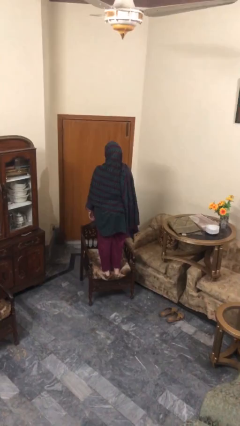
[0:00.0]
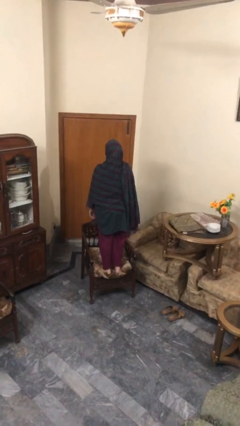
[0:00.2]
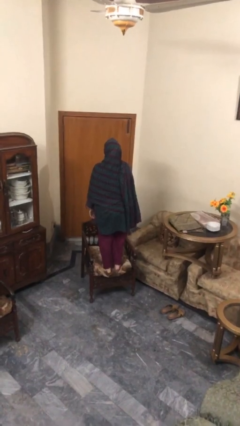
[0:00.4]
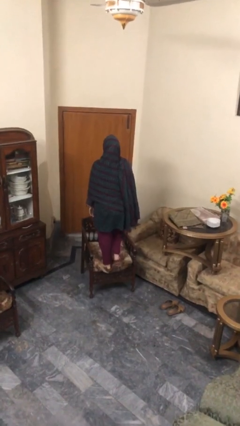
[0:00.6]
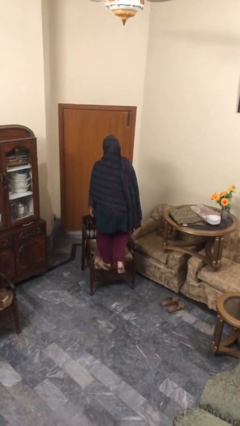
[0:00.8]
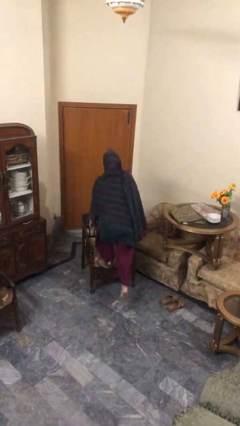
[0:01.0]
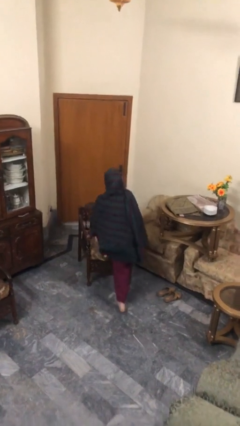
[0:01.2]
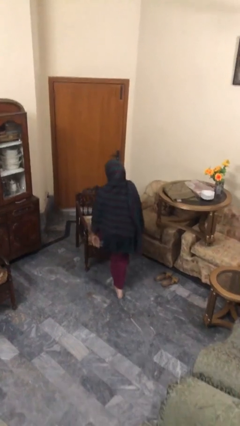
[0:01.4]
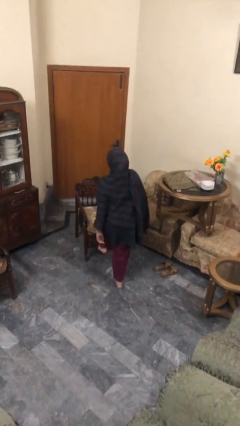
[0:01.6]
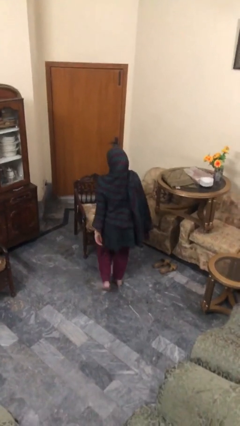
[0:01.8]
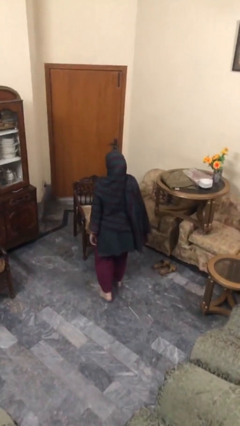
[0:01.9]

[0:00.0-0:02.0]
person climbs off chair

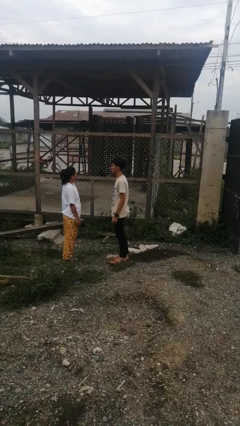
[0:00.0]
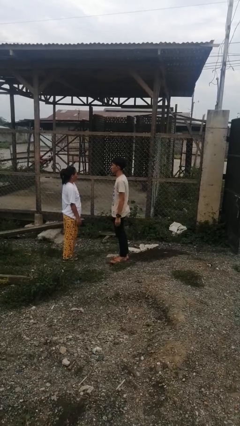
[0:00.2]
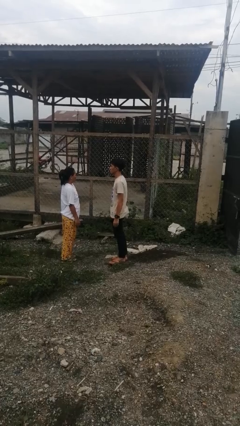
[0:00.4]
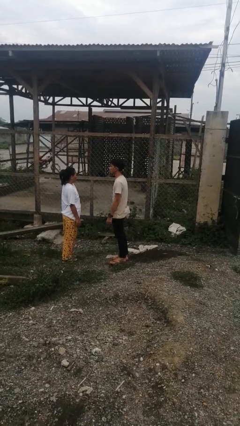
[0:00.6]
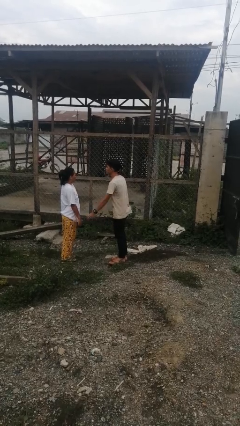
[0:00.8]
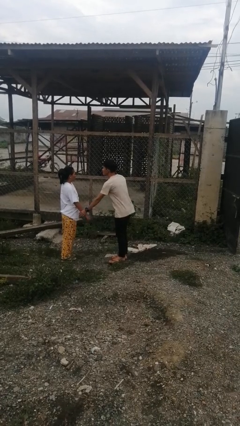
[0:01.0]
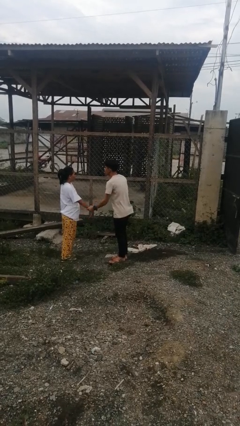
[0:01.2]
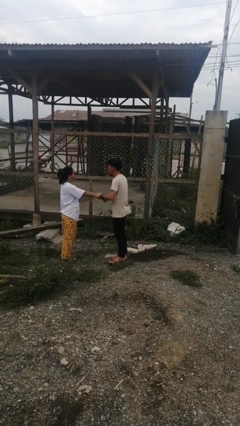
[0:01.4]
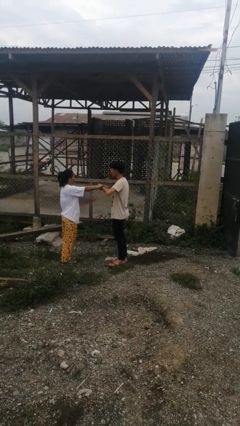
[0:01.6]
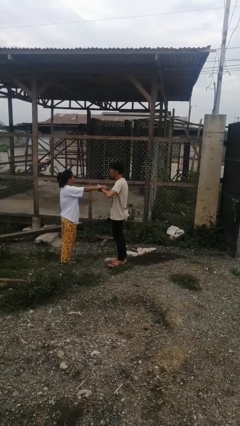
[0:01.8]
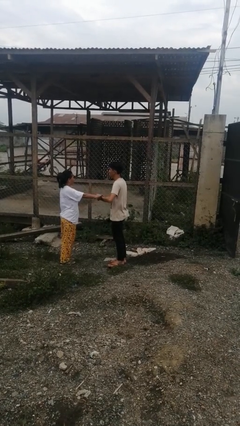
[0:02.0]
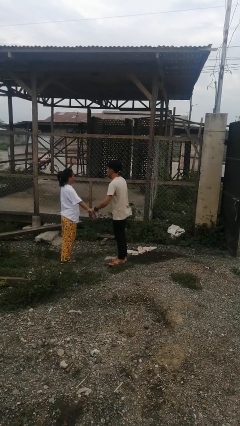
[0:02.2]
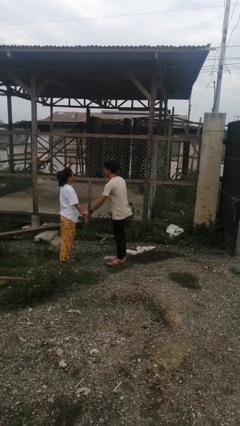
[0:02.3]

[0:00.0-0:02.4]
person grabs person by forearm

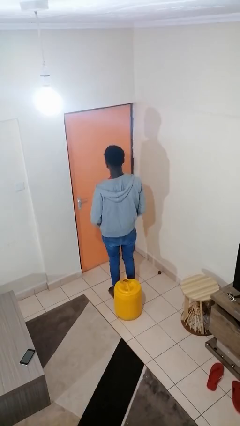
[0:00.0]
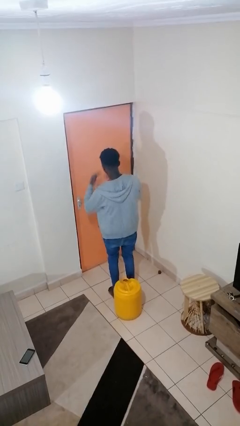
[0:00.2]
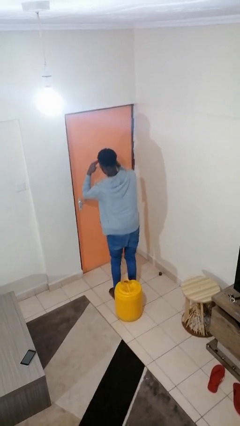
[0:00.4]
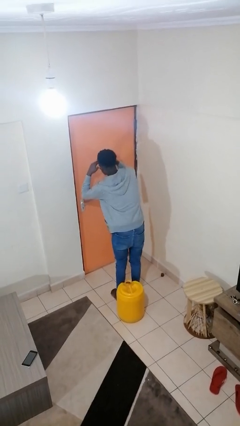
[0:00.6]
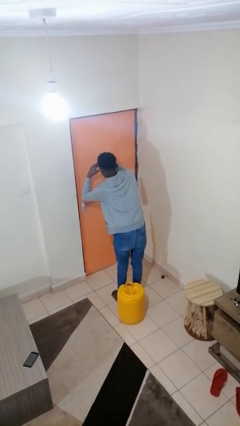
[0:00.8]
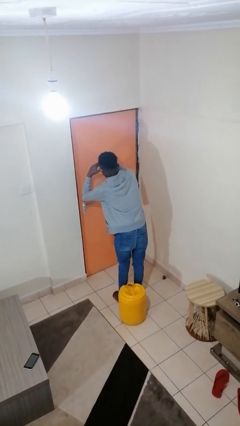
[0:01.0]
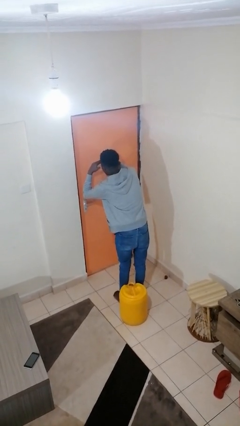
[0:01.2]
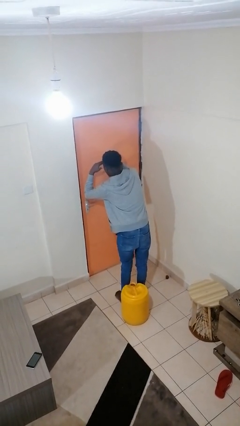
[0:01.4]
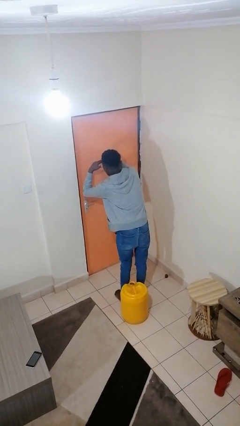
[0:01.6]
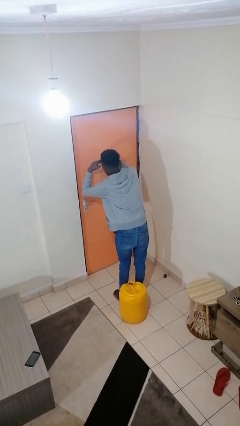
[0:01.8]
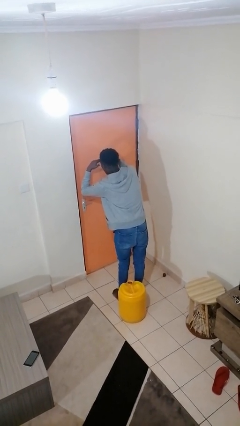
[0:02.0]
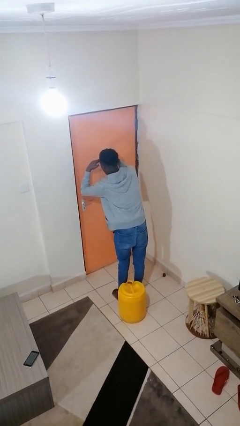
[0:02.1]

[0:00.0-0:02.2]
person shades eyes

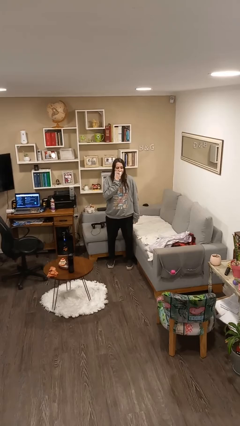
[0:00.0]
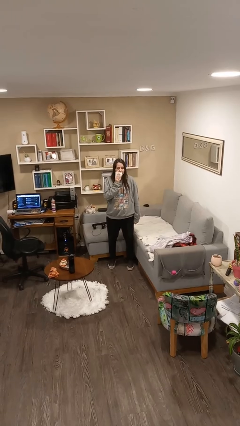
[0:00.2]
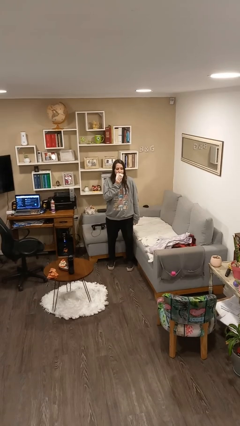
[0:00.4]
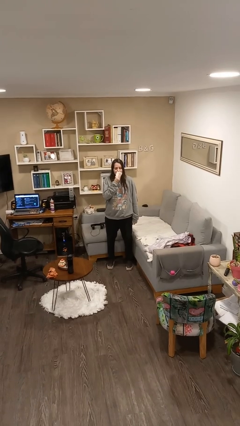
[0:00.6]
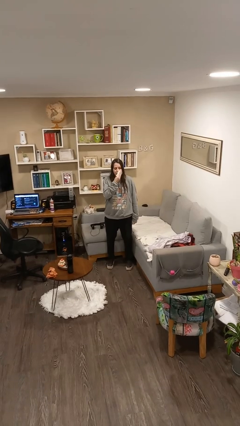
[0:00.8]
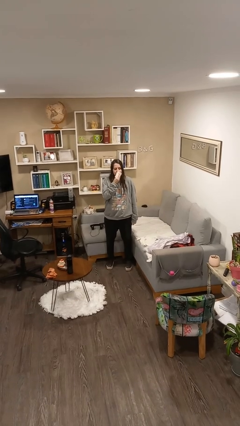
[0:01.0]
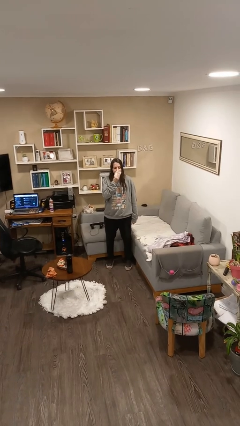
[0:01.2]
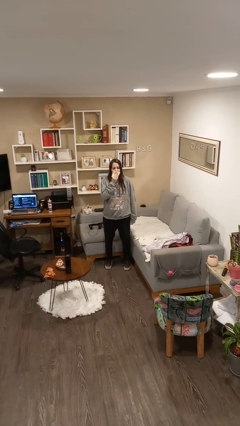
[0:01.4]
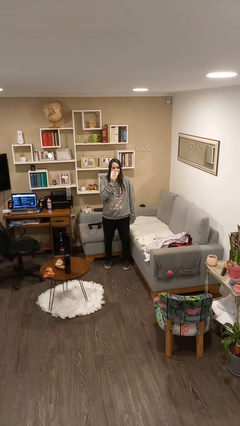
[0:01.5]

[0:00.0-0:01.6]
person wipes mouth with napkin

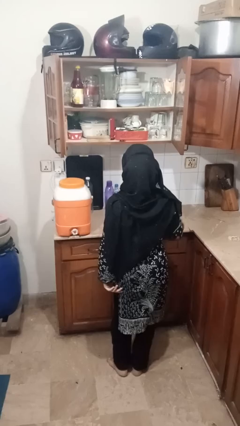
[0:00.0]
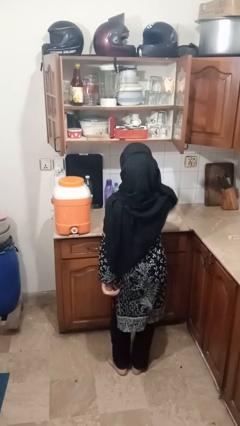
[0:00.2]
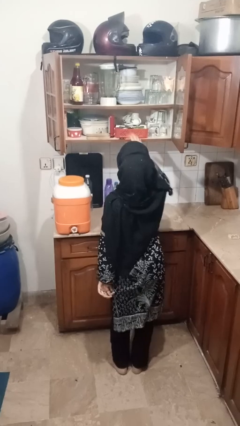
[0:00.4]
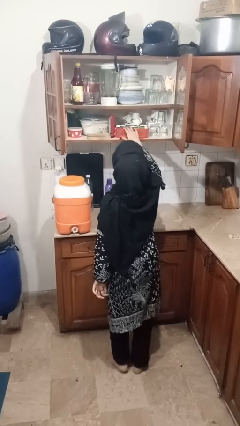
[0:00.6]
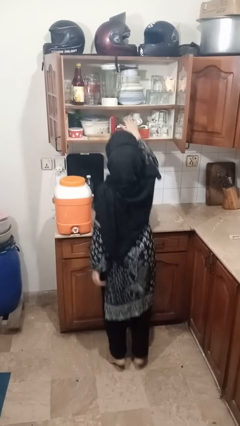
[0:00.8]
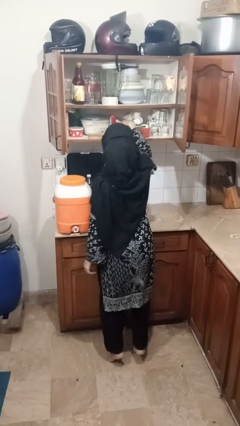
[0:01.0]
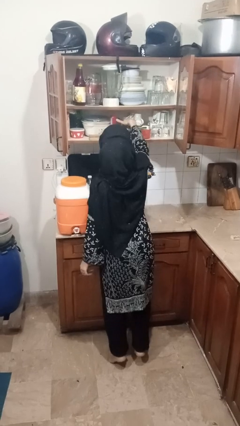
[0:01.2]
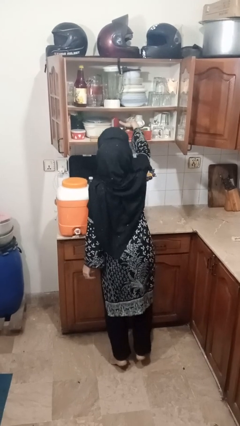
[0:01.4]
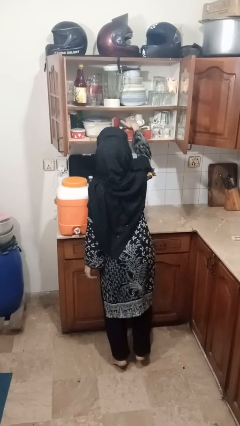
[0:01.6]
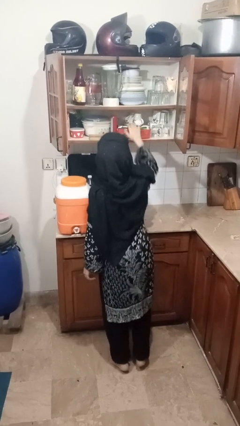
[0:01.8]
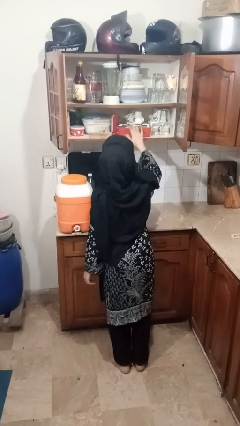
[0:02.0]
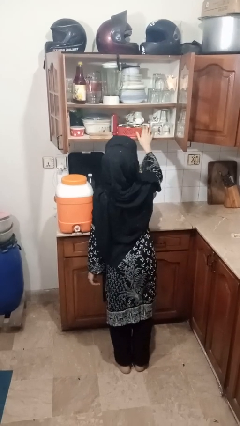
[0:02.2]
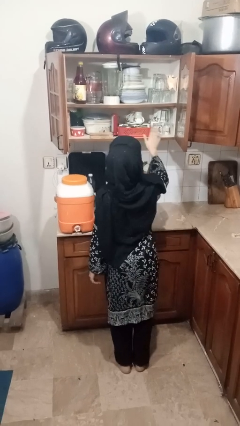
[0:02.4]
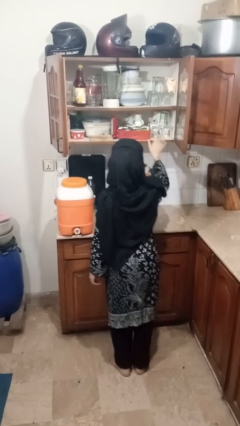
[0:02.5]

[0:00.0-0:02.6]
person searches in cabinet

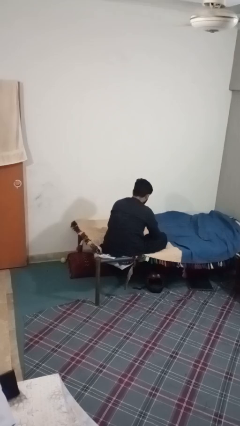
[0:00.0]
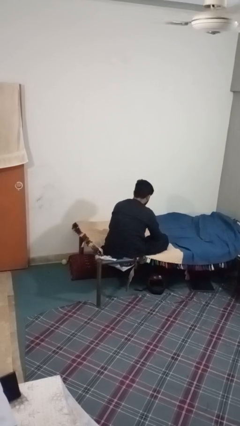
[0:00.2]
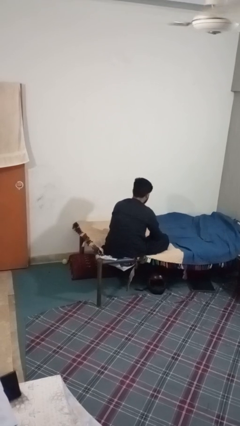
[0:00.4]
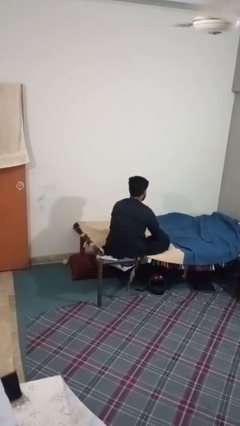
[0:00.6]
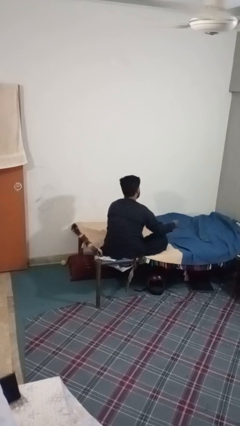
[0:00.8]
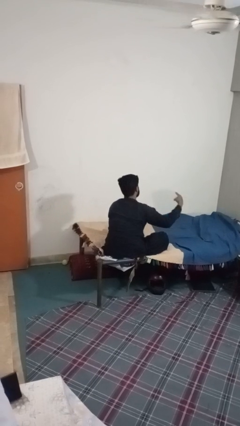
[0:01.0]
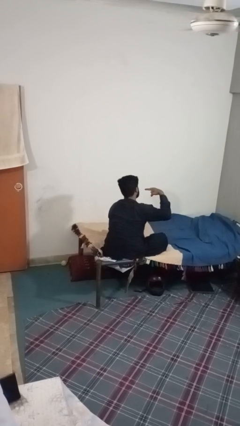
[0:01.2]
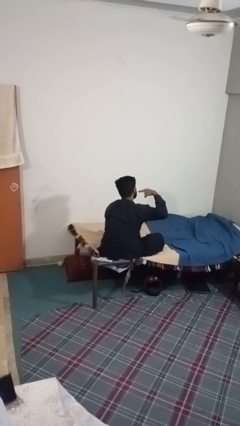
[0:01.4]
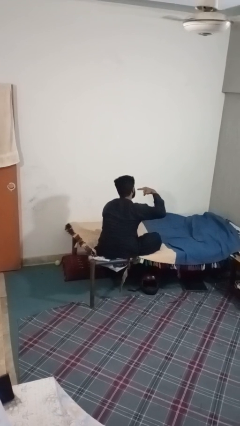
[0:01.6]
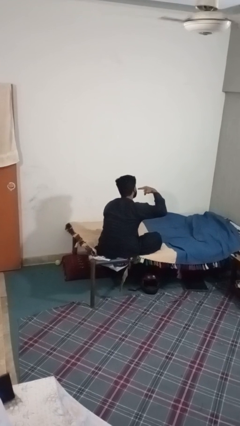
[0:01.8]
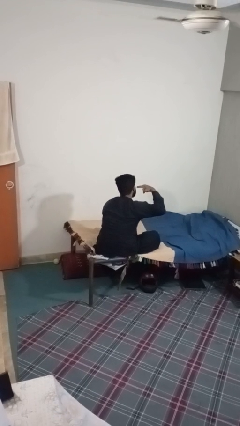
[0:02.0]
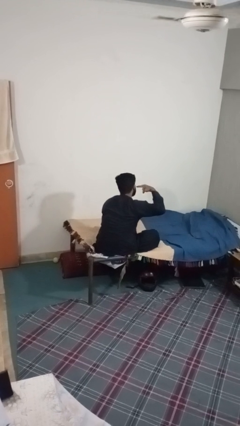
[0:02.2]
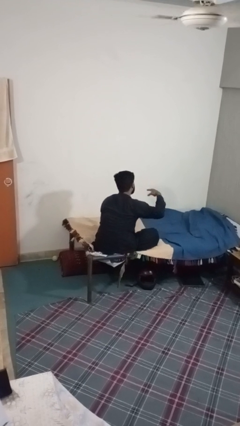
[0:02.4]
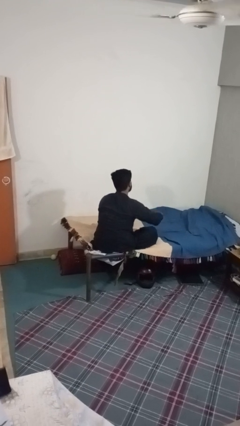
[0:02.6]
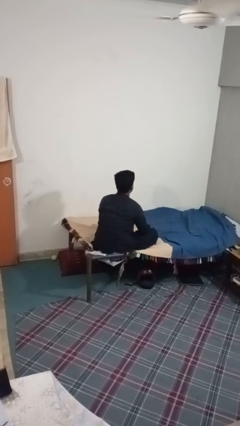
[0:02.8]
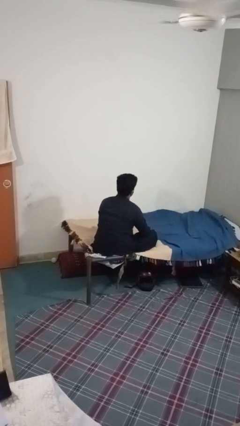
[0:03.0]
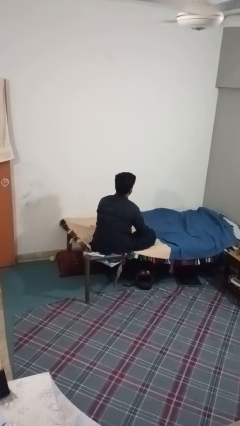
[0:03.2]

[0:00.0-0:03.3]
person gestures listen closely

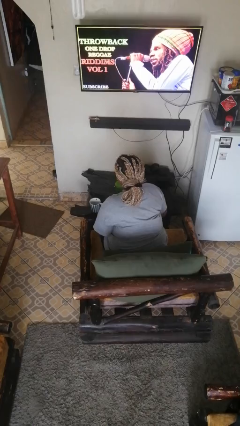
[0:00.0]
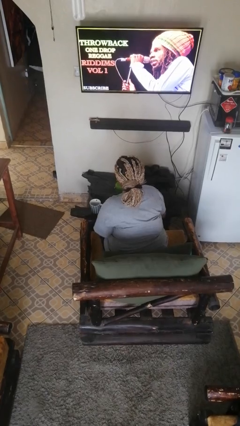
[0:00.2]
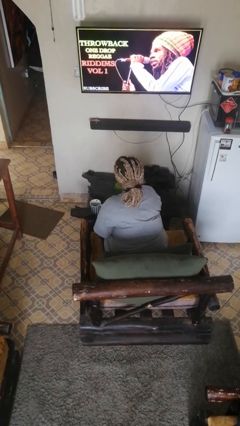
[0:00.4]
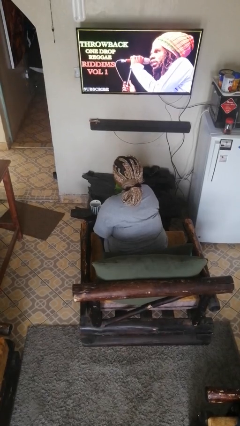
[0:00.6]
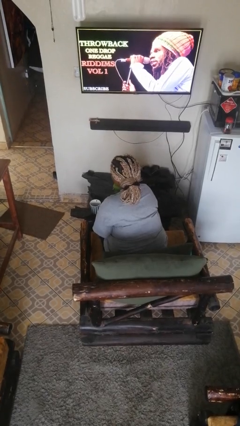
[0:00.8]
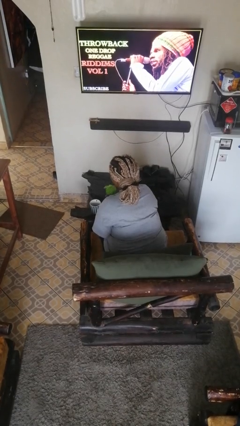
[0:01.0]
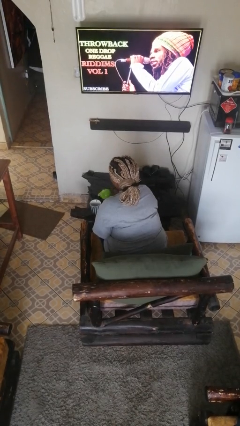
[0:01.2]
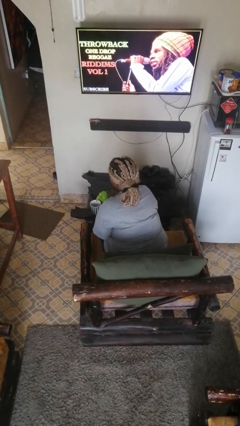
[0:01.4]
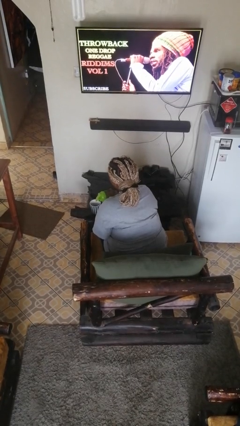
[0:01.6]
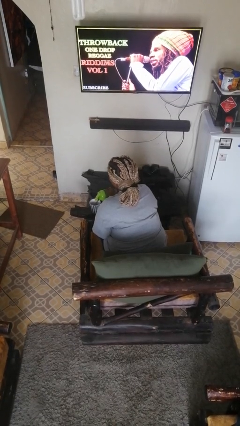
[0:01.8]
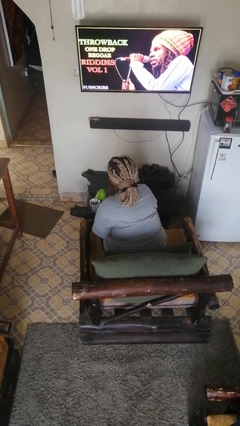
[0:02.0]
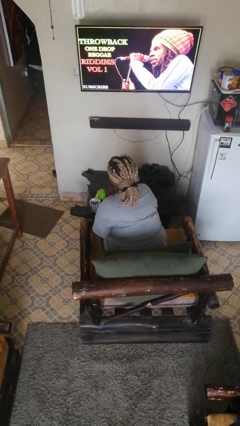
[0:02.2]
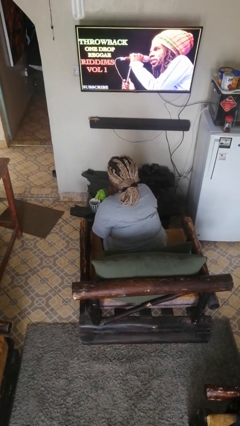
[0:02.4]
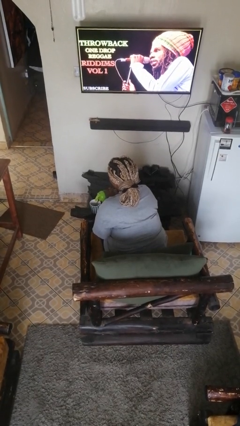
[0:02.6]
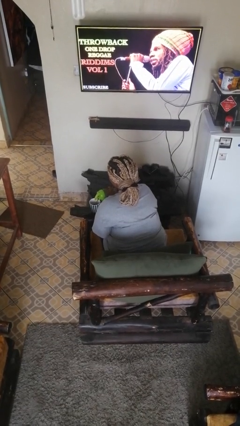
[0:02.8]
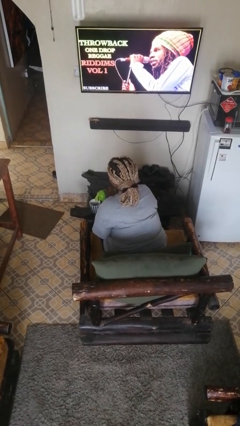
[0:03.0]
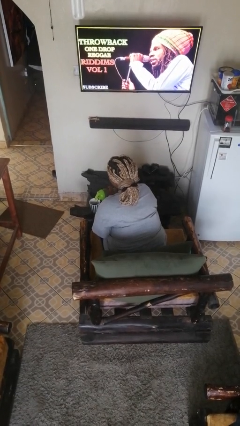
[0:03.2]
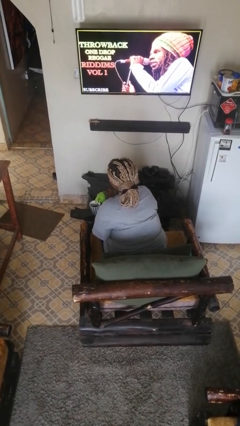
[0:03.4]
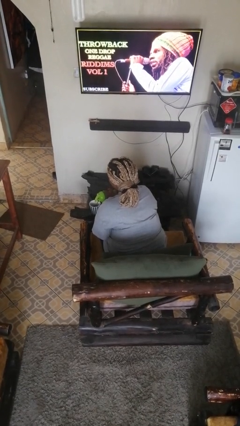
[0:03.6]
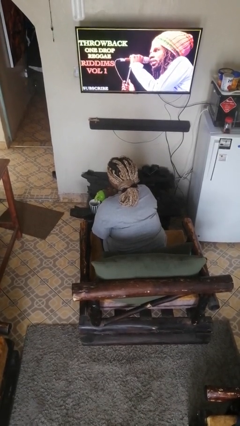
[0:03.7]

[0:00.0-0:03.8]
person pours coffee into mug
